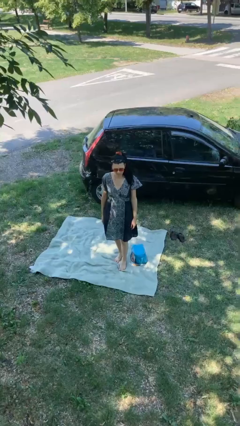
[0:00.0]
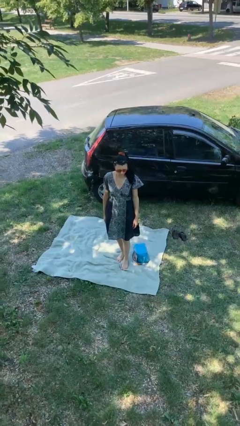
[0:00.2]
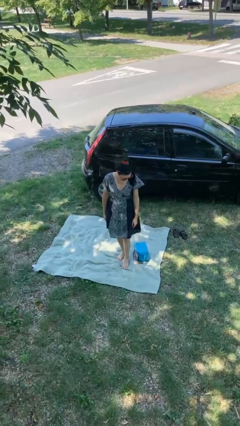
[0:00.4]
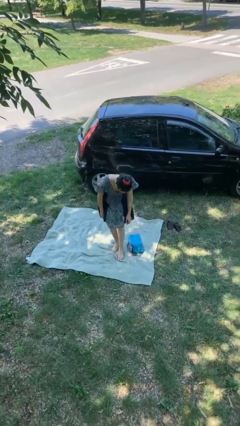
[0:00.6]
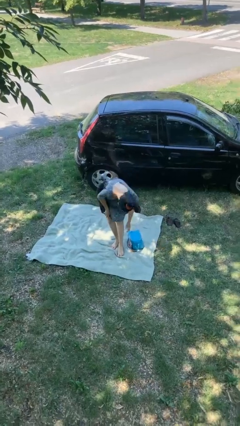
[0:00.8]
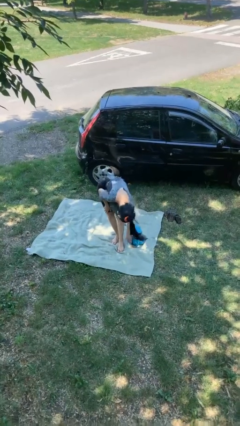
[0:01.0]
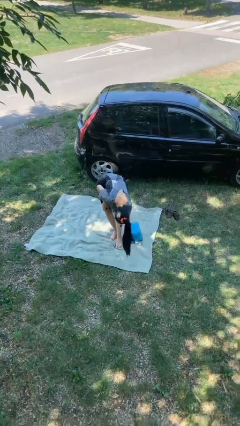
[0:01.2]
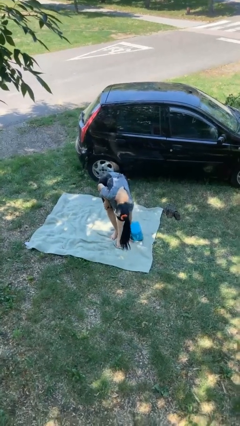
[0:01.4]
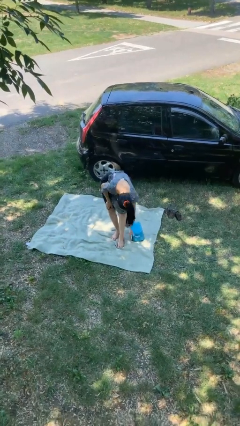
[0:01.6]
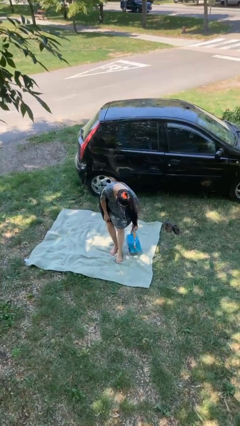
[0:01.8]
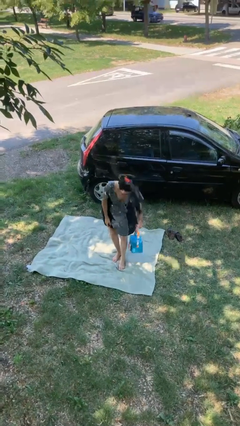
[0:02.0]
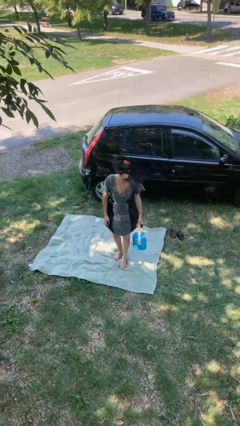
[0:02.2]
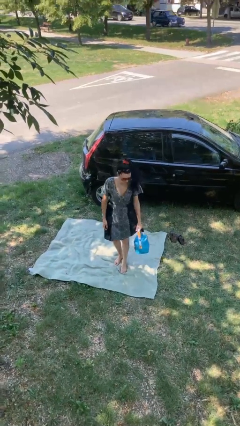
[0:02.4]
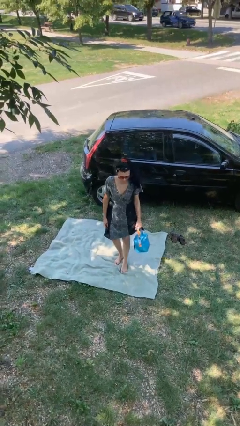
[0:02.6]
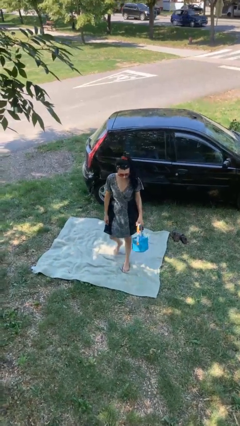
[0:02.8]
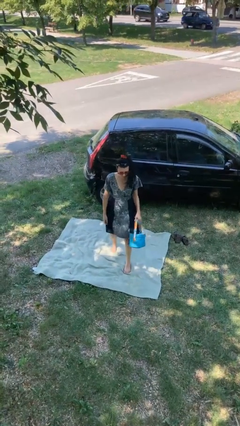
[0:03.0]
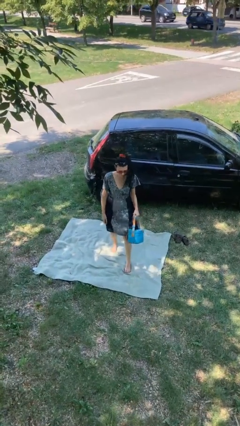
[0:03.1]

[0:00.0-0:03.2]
person picks up object from floor

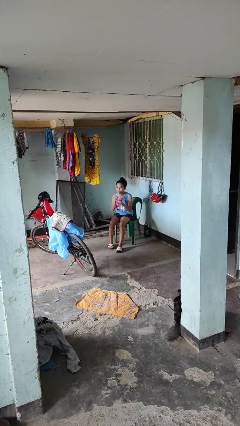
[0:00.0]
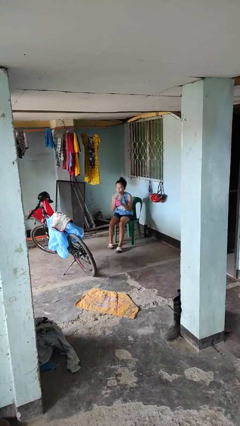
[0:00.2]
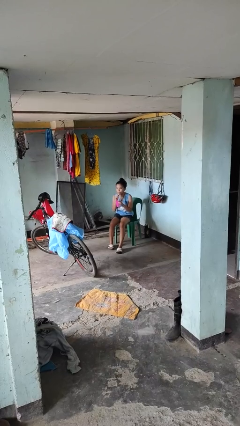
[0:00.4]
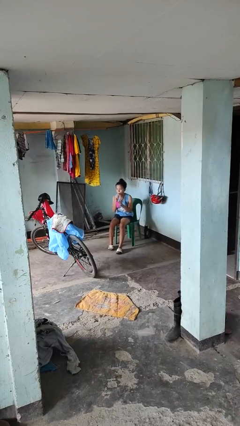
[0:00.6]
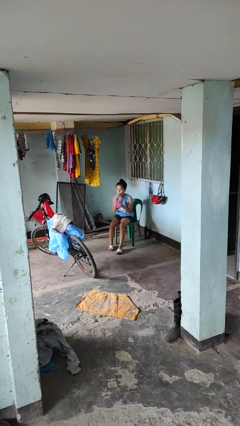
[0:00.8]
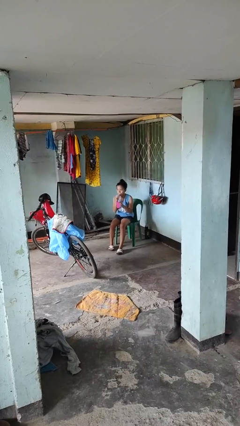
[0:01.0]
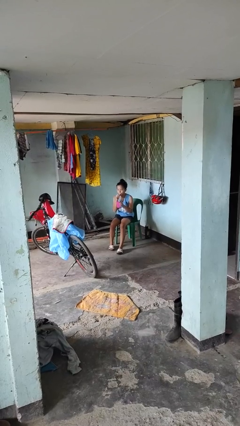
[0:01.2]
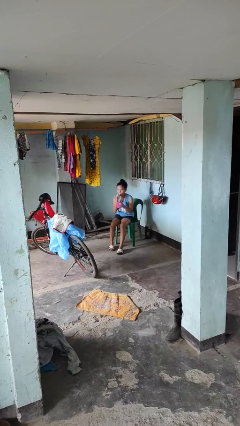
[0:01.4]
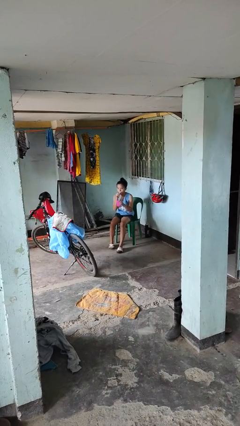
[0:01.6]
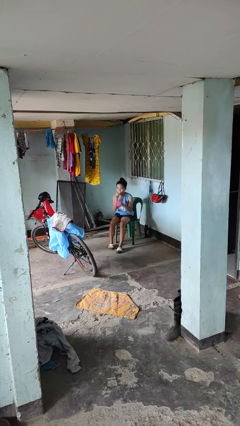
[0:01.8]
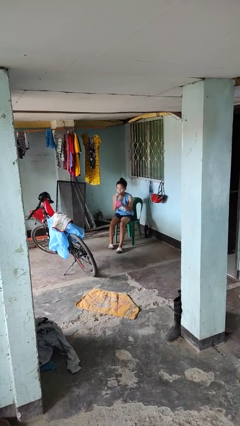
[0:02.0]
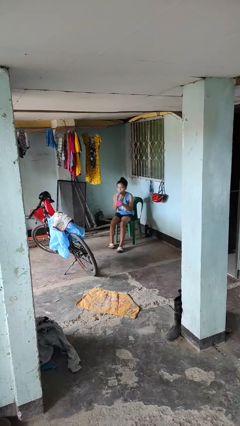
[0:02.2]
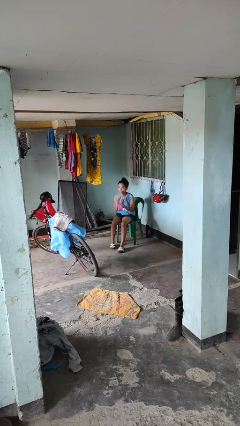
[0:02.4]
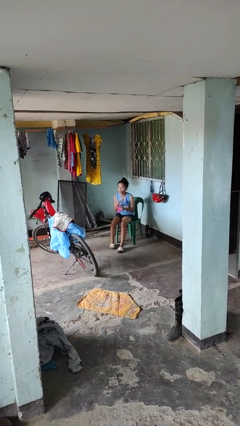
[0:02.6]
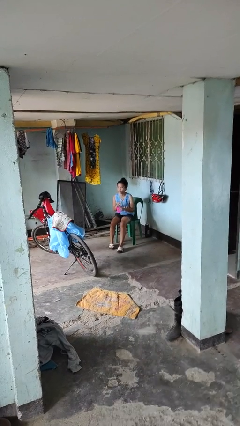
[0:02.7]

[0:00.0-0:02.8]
person drinks from straw

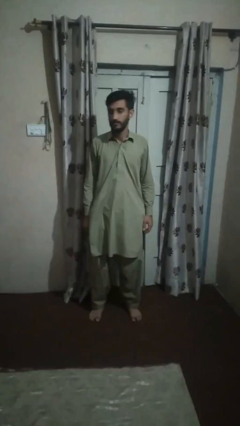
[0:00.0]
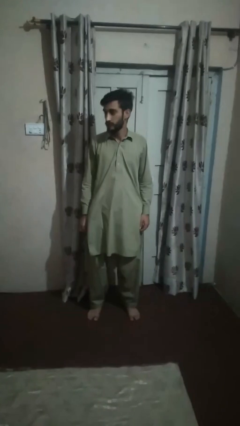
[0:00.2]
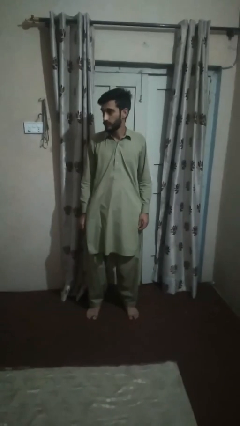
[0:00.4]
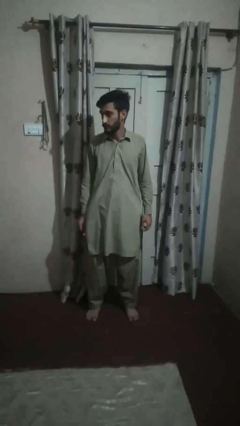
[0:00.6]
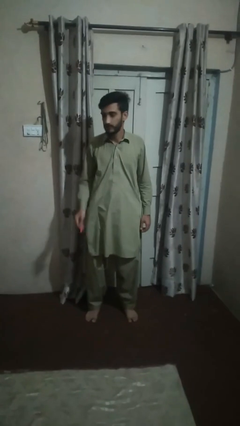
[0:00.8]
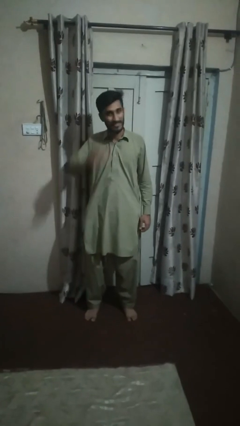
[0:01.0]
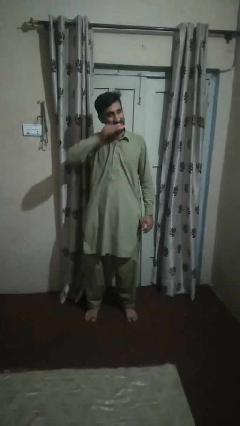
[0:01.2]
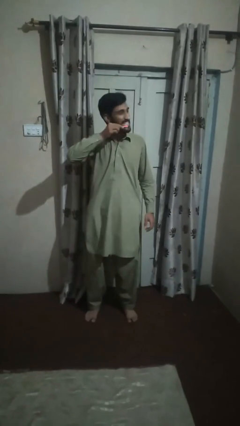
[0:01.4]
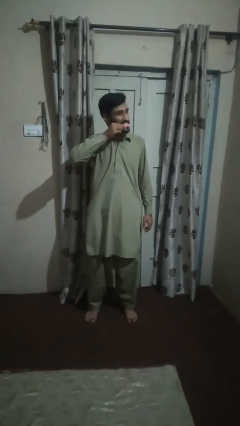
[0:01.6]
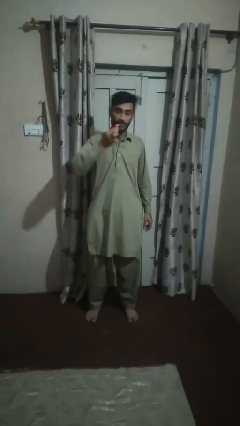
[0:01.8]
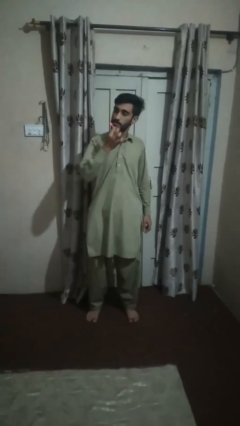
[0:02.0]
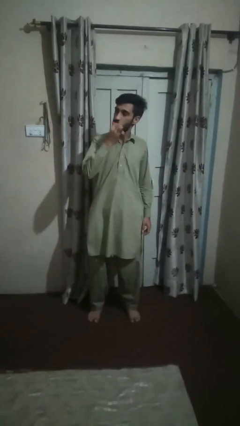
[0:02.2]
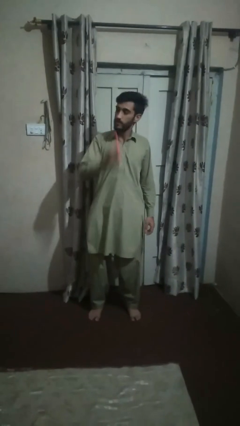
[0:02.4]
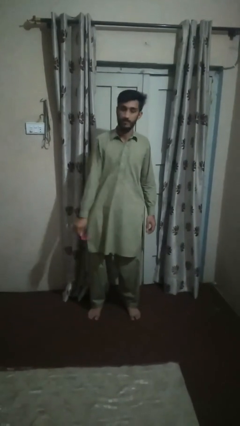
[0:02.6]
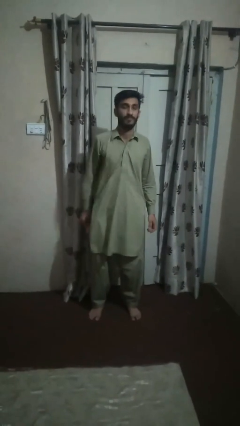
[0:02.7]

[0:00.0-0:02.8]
person brushes teeth

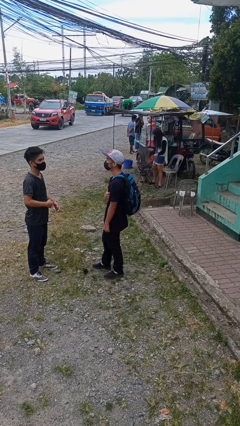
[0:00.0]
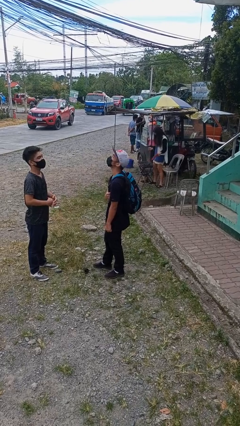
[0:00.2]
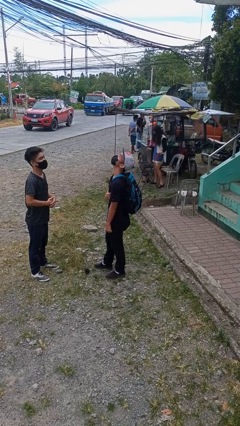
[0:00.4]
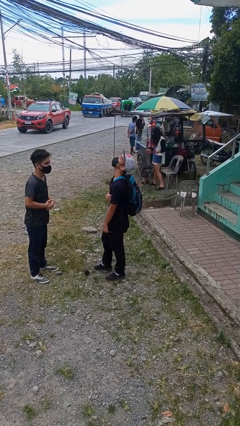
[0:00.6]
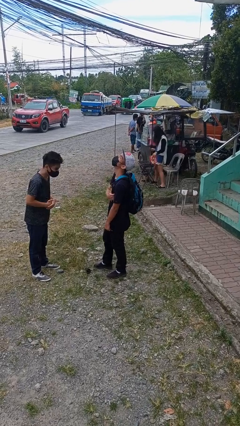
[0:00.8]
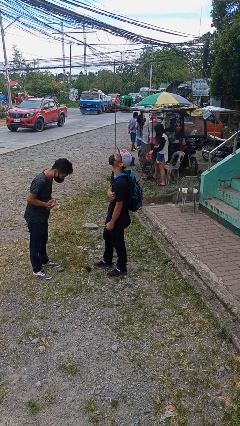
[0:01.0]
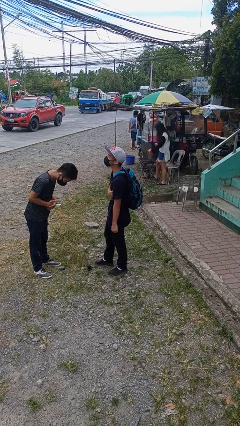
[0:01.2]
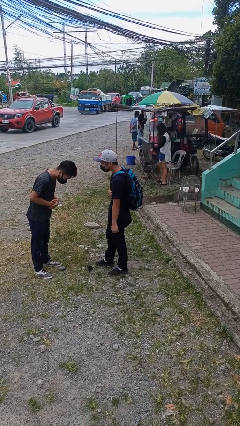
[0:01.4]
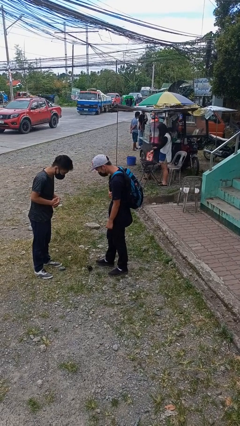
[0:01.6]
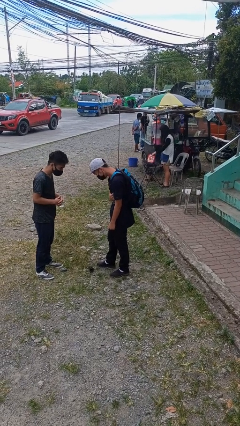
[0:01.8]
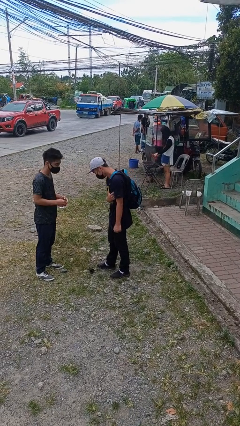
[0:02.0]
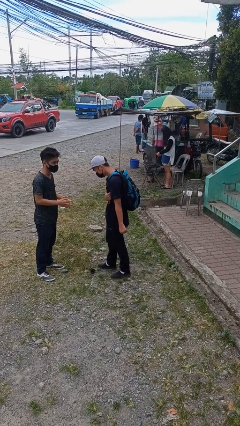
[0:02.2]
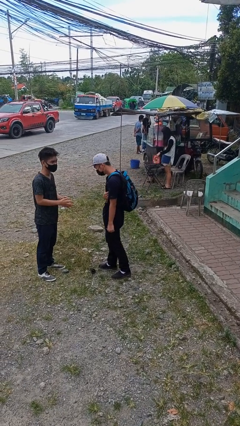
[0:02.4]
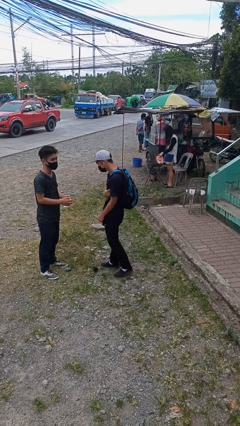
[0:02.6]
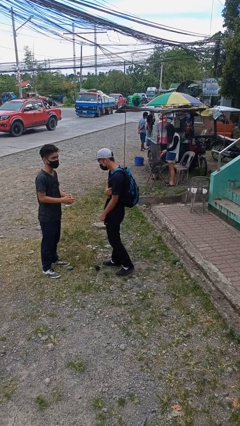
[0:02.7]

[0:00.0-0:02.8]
person laughs with person

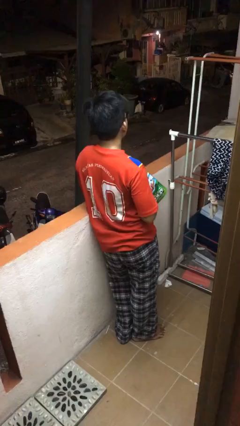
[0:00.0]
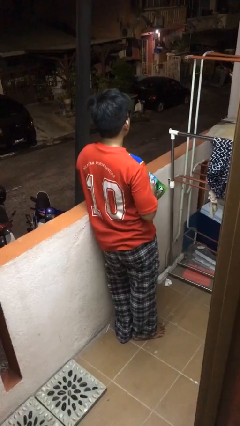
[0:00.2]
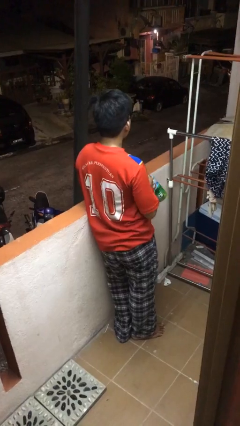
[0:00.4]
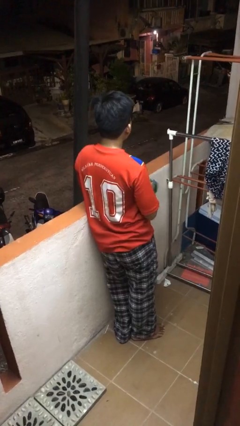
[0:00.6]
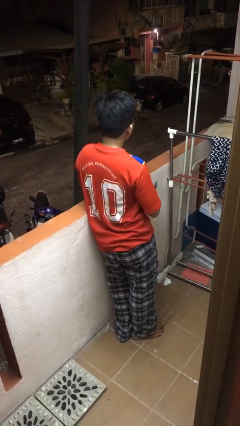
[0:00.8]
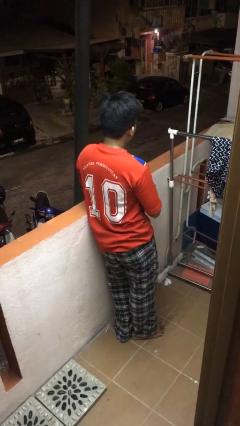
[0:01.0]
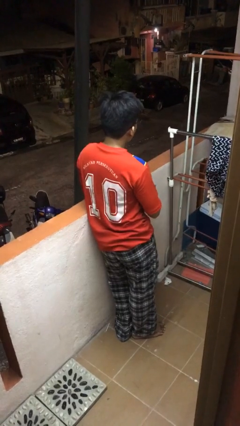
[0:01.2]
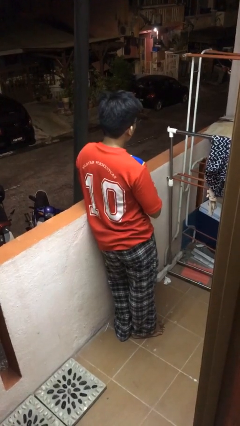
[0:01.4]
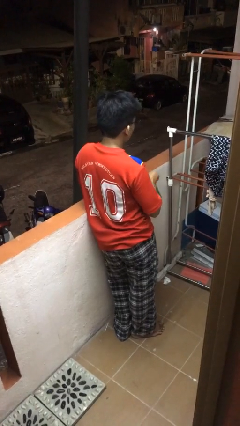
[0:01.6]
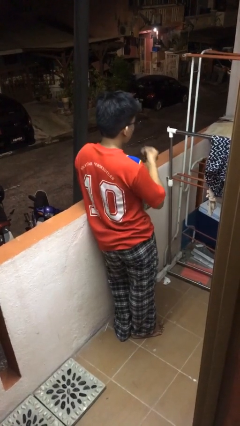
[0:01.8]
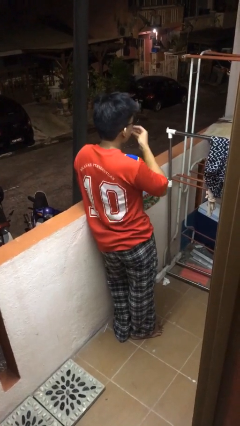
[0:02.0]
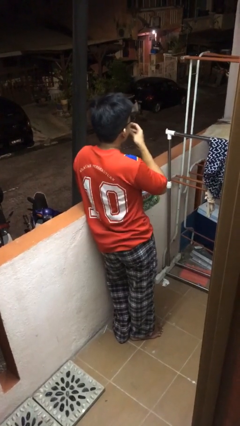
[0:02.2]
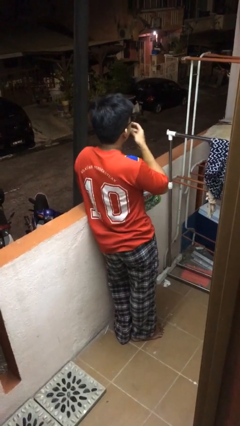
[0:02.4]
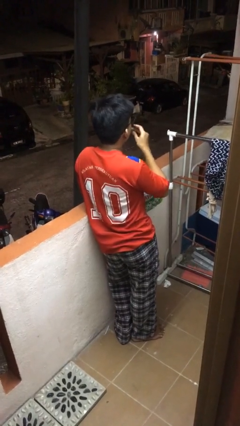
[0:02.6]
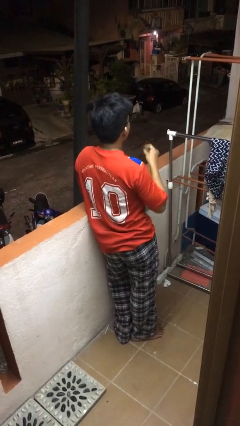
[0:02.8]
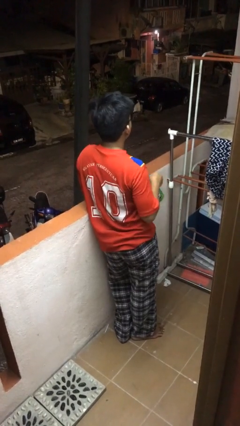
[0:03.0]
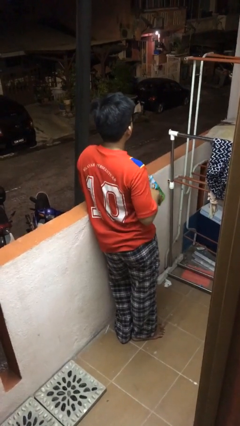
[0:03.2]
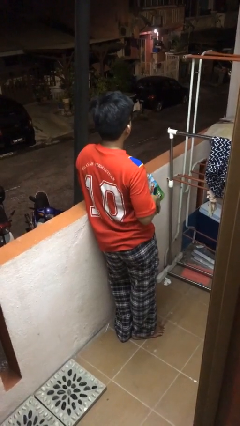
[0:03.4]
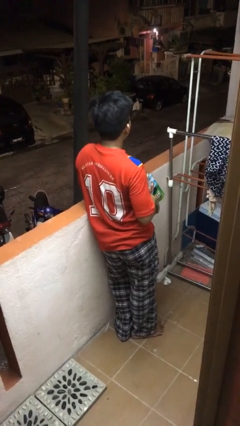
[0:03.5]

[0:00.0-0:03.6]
person eats snack from bag

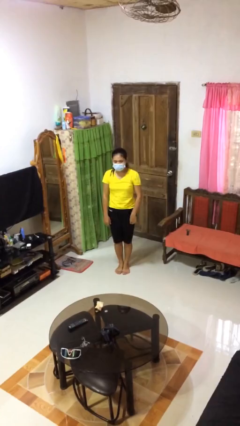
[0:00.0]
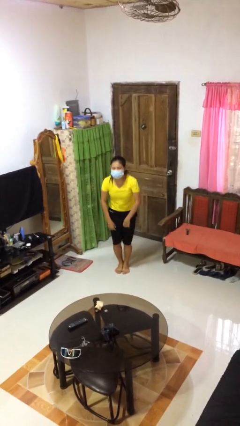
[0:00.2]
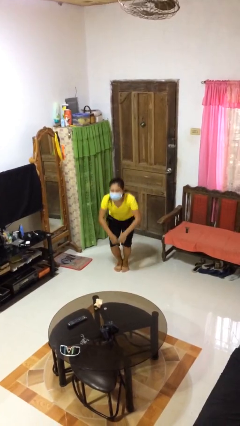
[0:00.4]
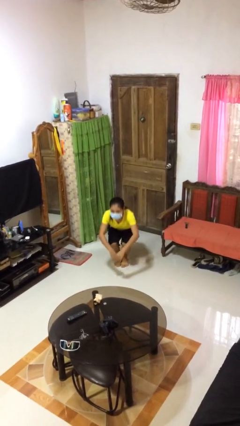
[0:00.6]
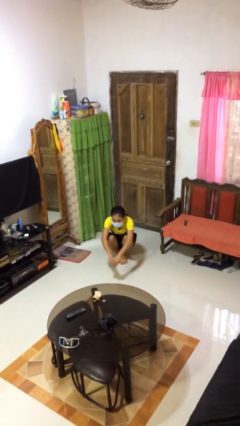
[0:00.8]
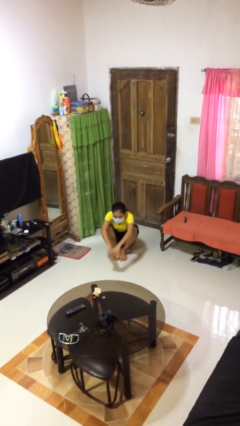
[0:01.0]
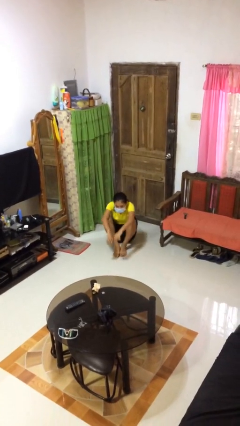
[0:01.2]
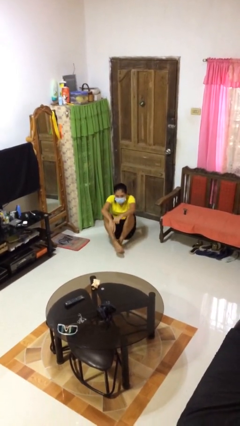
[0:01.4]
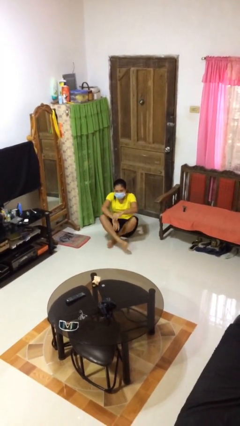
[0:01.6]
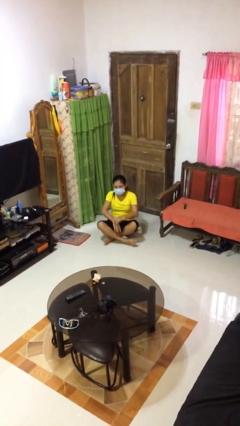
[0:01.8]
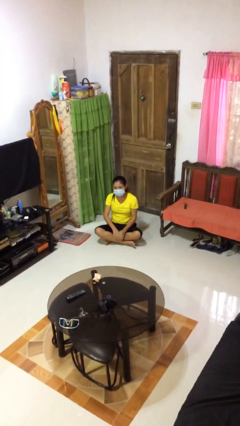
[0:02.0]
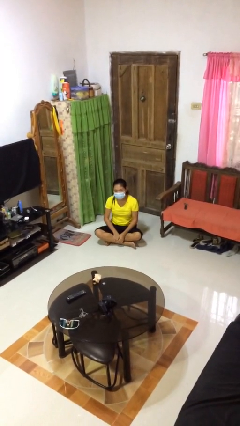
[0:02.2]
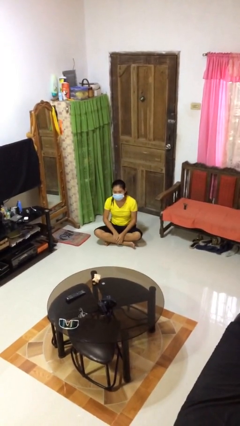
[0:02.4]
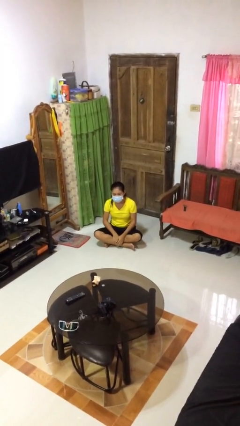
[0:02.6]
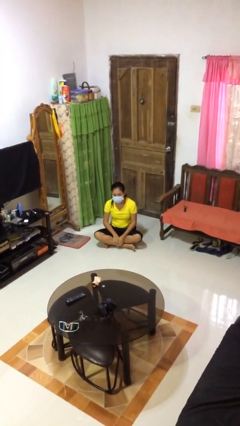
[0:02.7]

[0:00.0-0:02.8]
person sits crisscross
